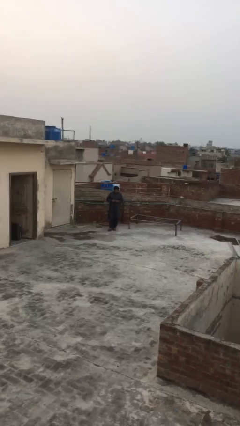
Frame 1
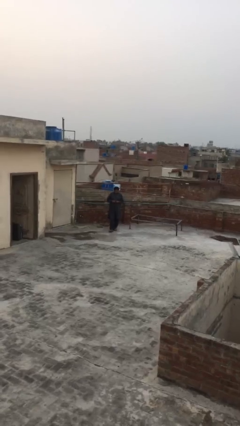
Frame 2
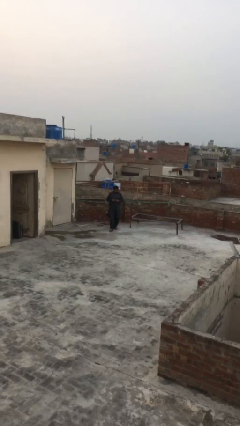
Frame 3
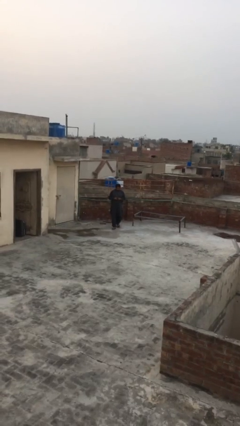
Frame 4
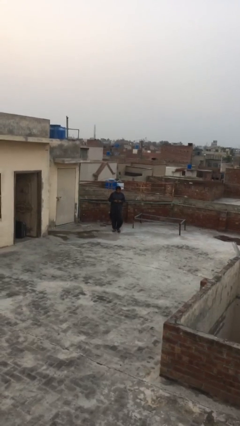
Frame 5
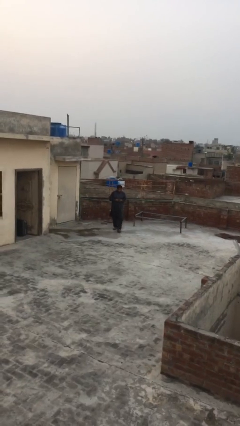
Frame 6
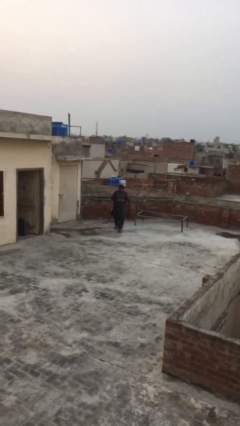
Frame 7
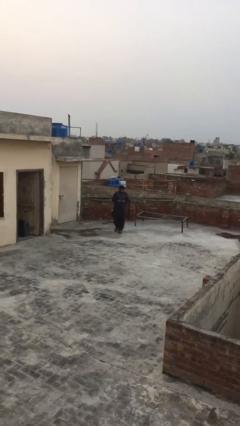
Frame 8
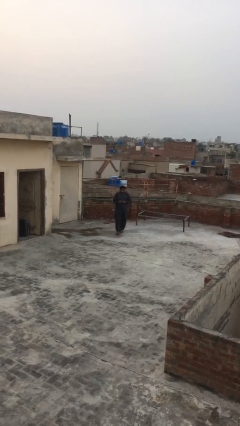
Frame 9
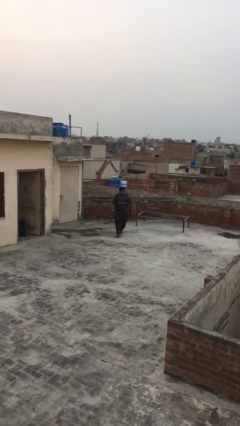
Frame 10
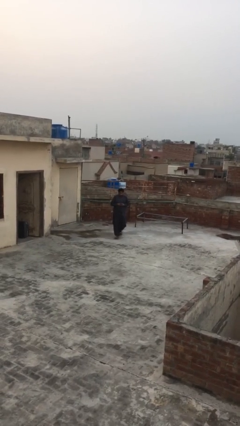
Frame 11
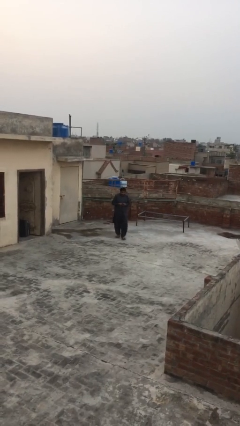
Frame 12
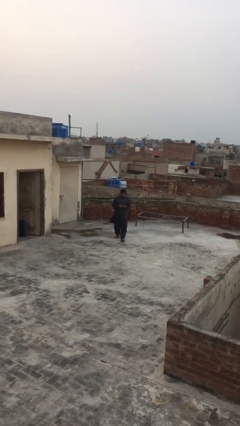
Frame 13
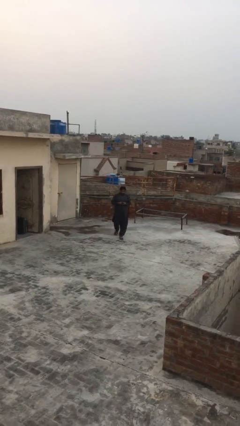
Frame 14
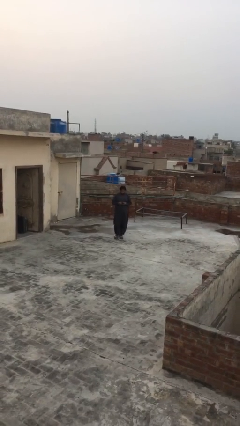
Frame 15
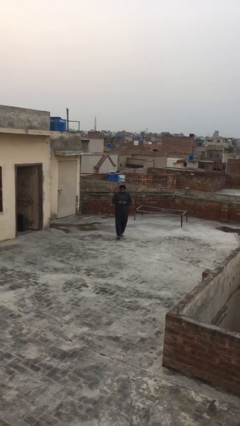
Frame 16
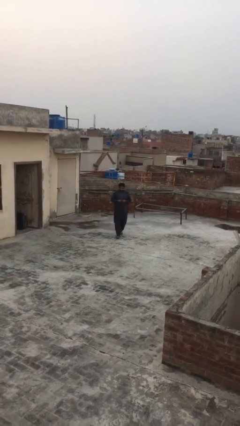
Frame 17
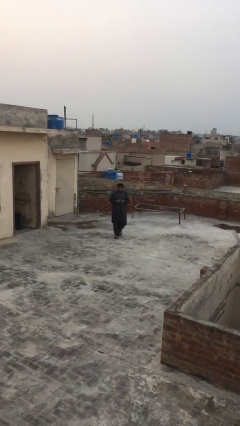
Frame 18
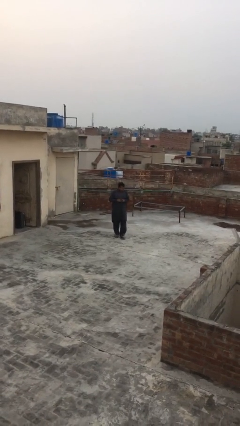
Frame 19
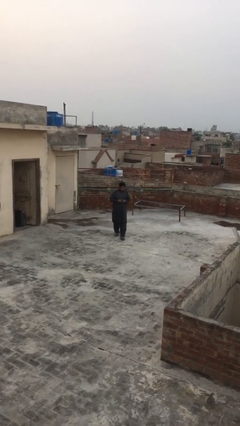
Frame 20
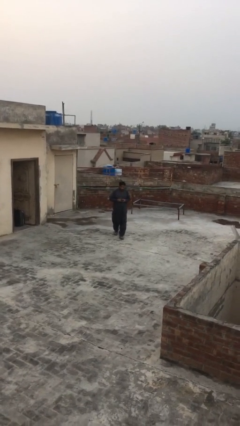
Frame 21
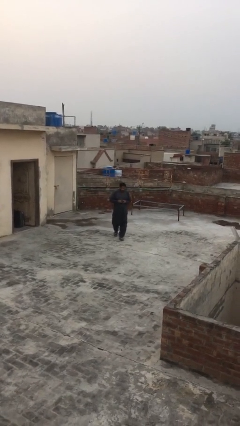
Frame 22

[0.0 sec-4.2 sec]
person texts on phone

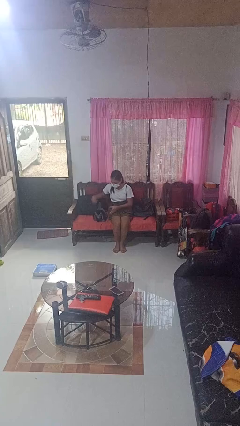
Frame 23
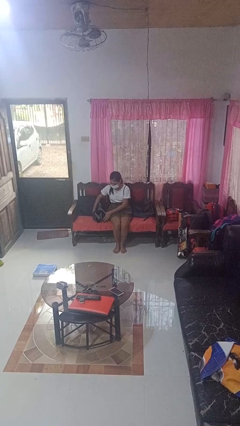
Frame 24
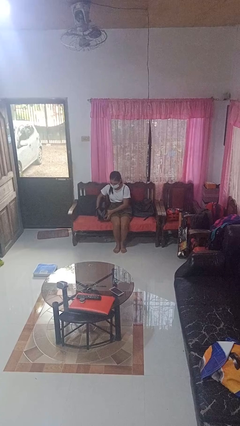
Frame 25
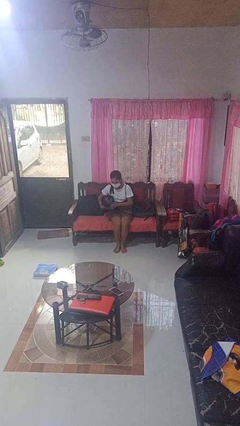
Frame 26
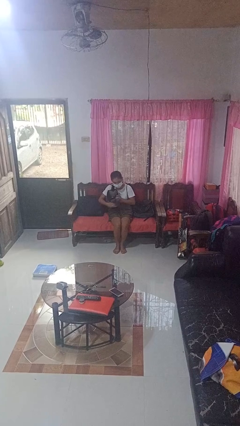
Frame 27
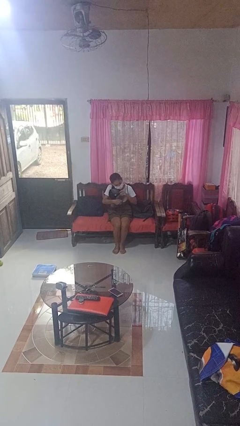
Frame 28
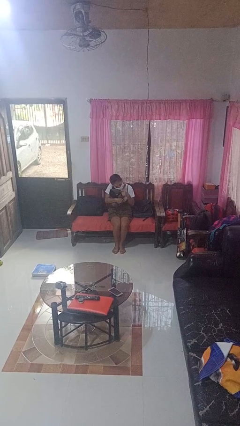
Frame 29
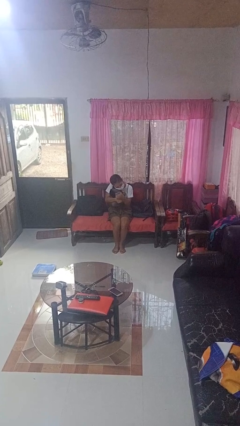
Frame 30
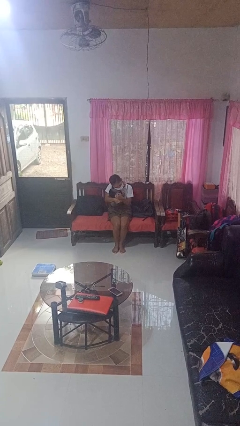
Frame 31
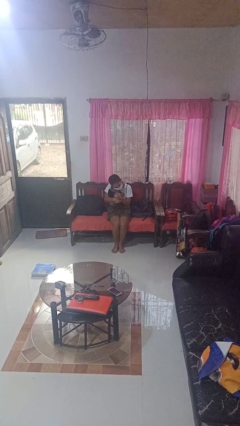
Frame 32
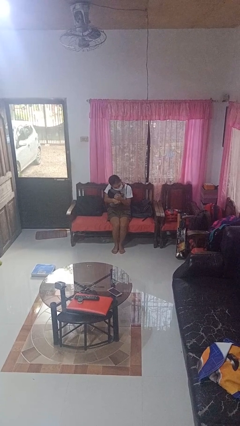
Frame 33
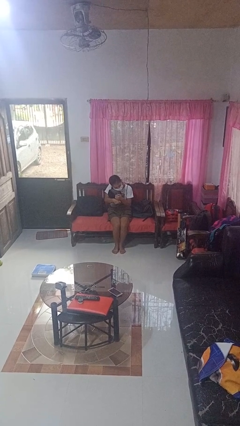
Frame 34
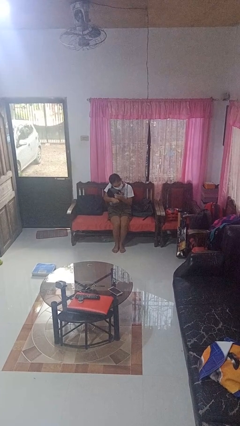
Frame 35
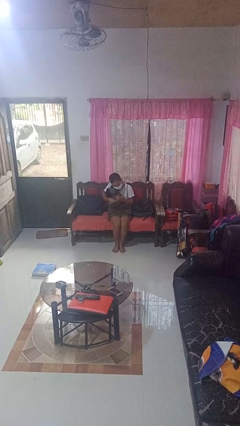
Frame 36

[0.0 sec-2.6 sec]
person hugs stuffed animal

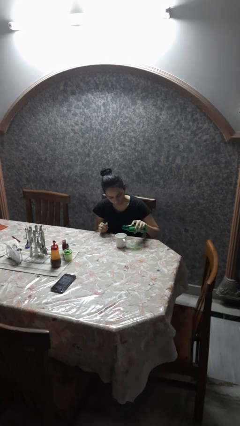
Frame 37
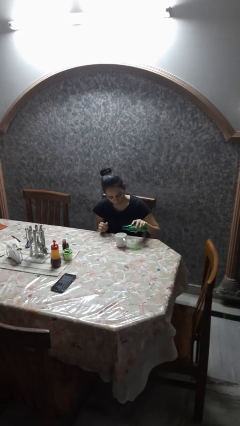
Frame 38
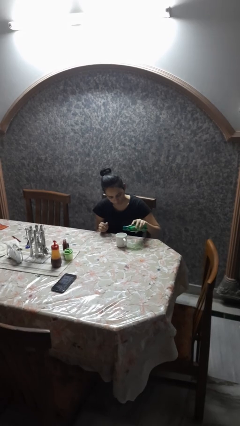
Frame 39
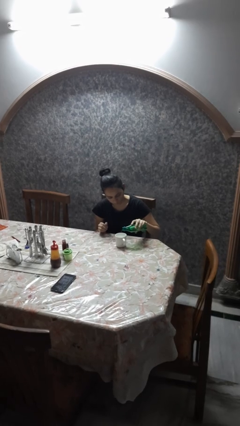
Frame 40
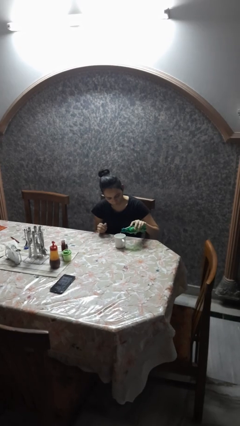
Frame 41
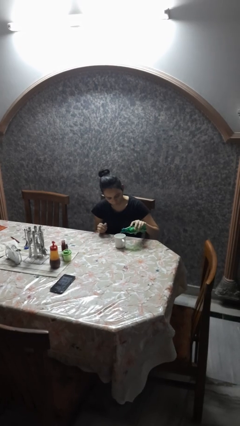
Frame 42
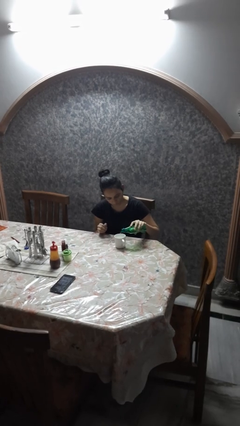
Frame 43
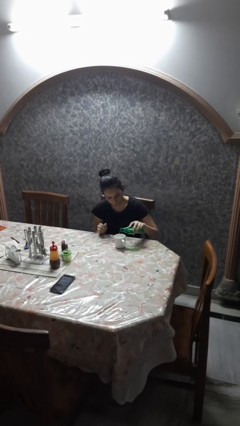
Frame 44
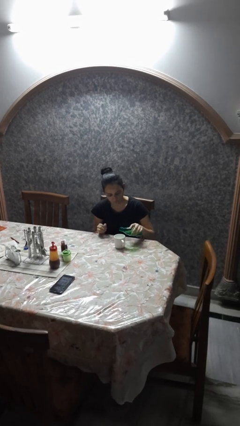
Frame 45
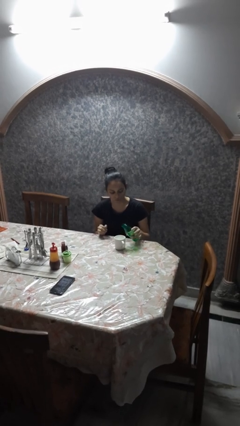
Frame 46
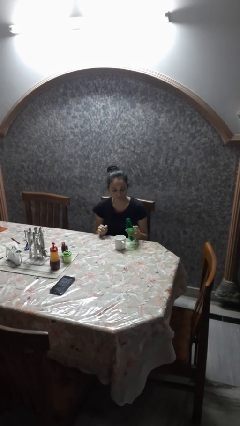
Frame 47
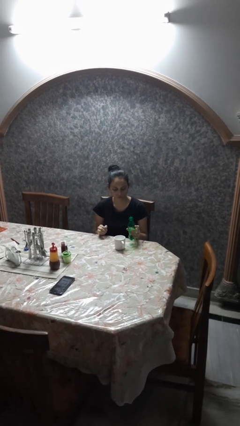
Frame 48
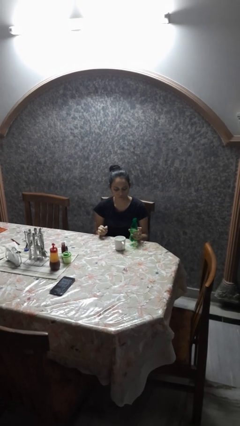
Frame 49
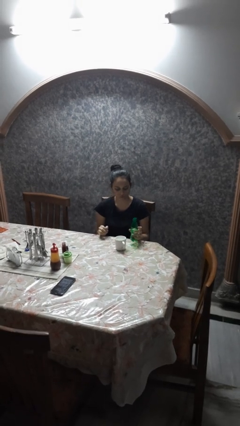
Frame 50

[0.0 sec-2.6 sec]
person pours liquid into cup

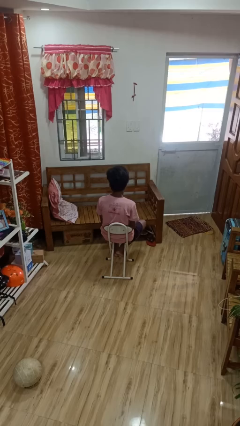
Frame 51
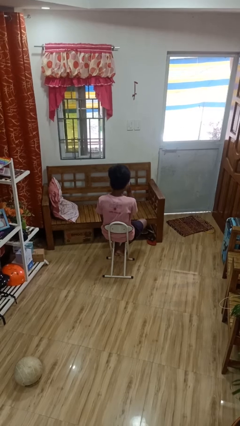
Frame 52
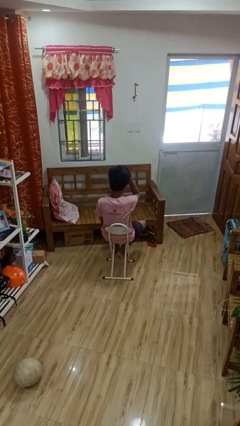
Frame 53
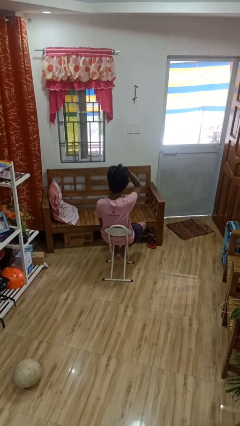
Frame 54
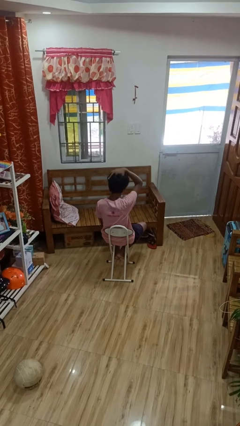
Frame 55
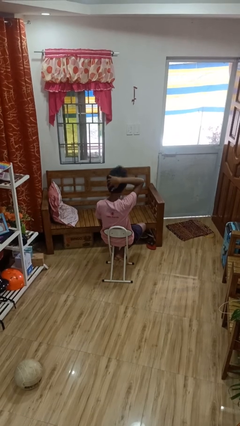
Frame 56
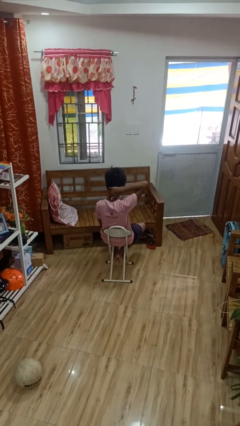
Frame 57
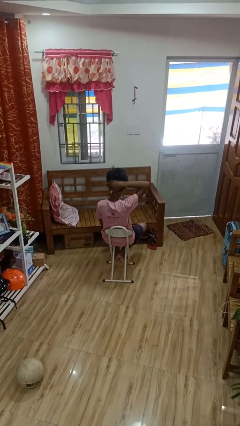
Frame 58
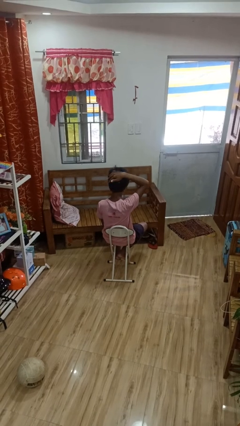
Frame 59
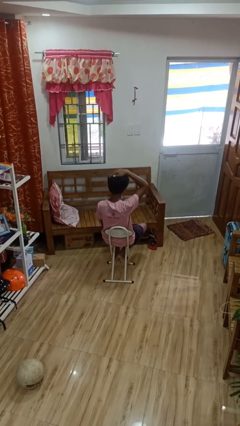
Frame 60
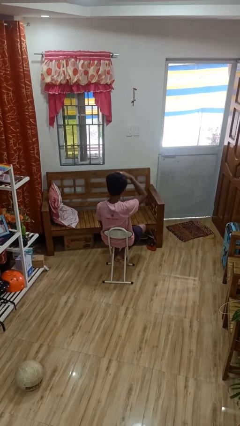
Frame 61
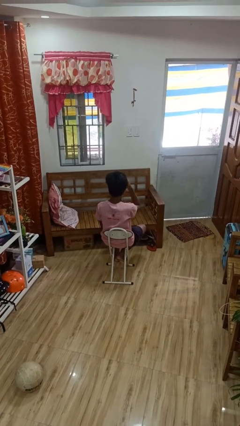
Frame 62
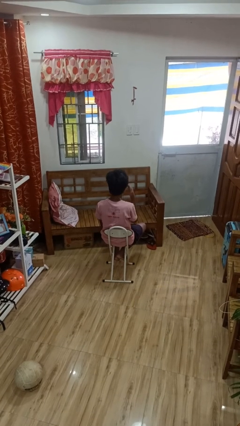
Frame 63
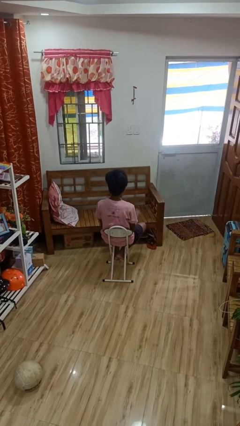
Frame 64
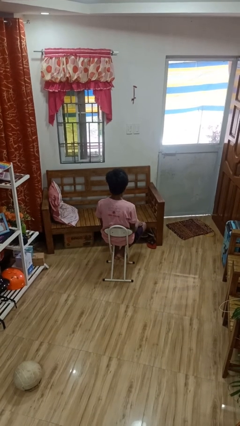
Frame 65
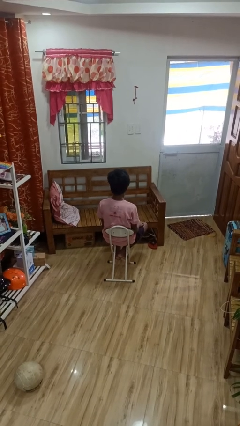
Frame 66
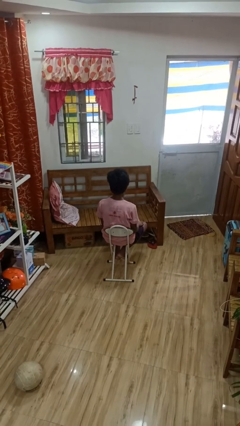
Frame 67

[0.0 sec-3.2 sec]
person strokes hair

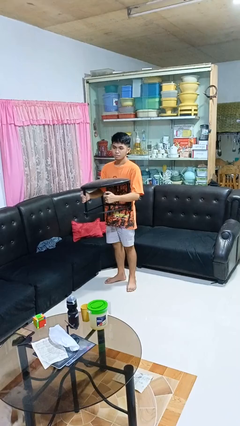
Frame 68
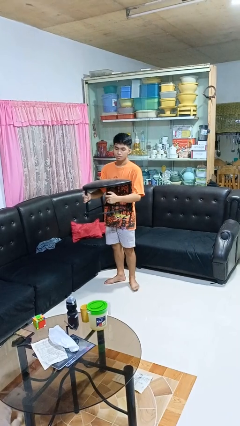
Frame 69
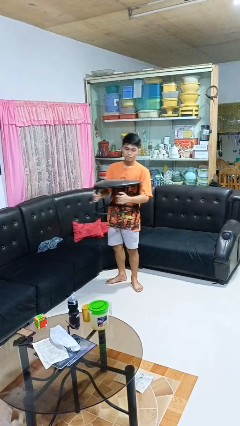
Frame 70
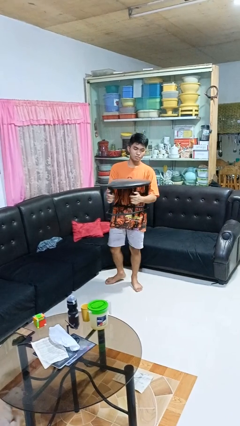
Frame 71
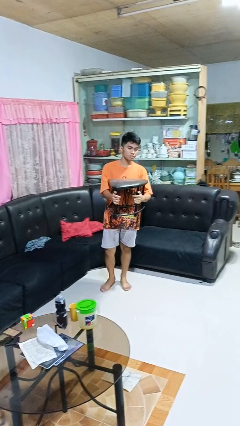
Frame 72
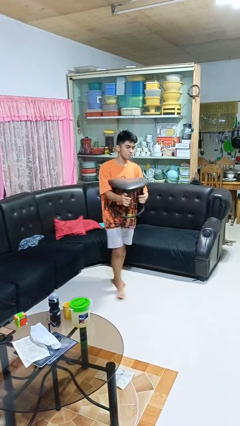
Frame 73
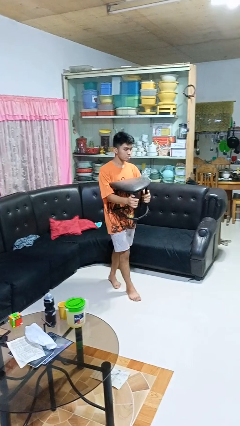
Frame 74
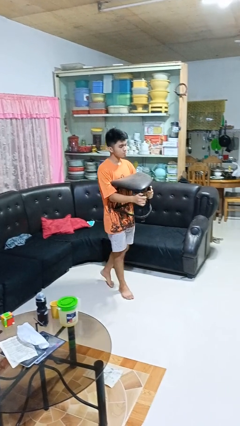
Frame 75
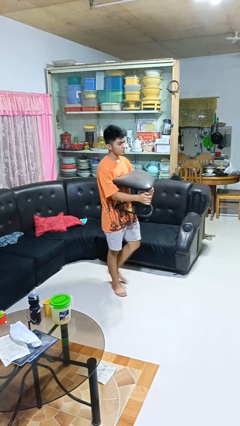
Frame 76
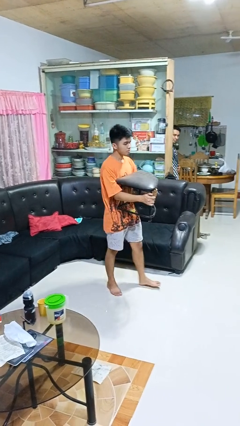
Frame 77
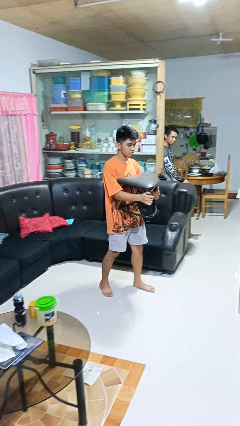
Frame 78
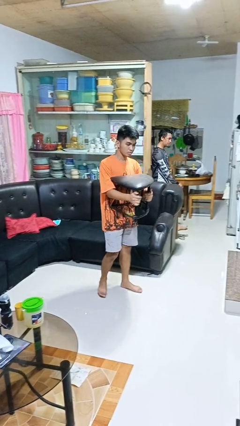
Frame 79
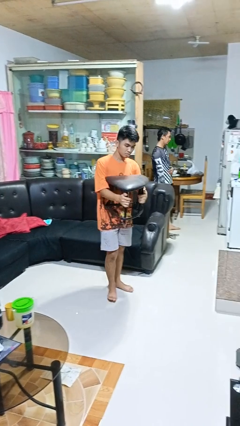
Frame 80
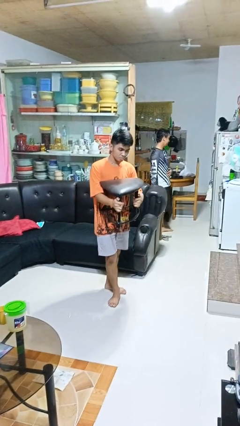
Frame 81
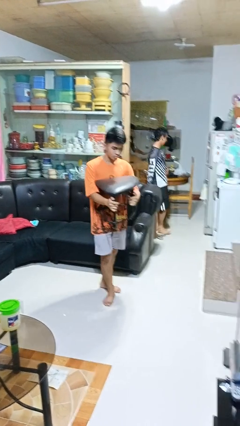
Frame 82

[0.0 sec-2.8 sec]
person carries furniture

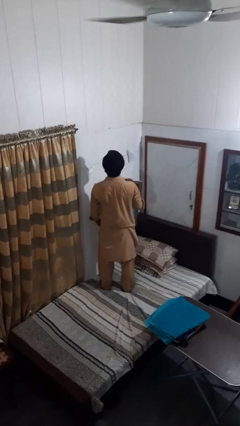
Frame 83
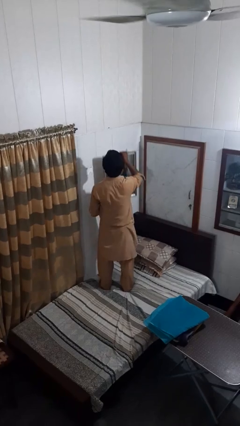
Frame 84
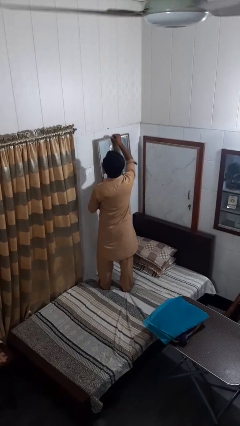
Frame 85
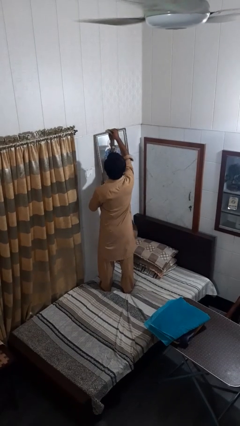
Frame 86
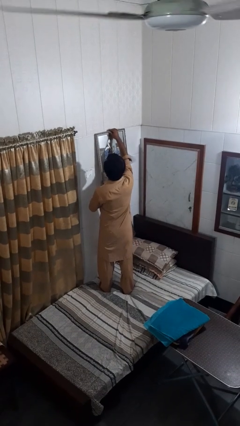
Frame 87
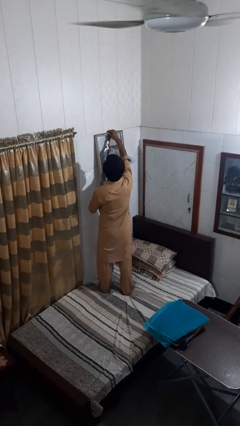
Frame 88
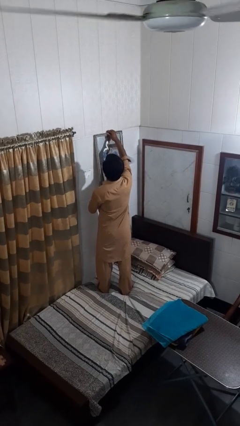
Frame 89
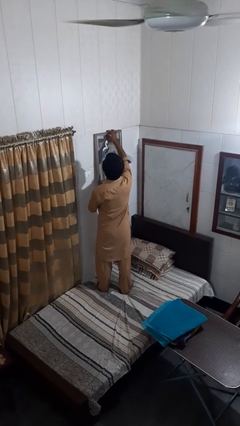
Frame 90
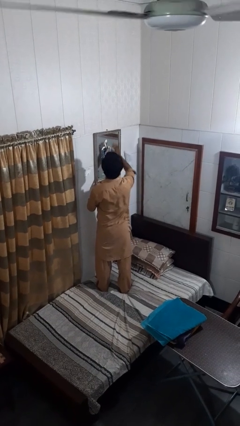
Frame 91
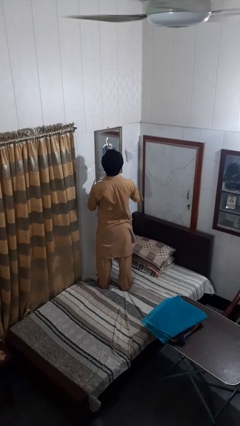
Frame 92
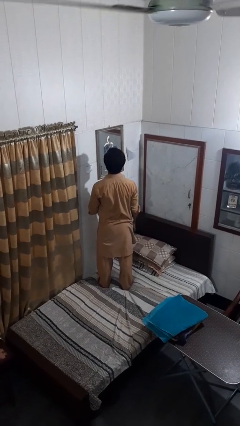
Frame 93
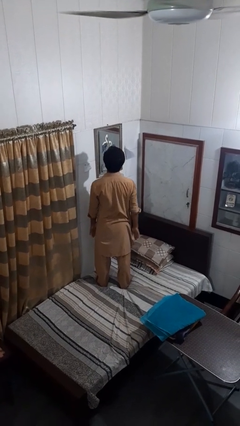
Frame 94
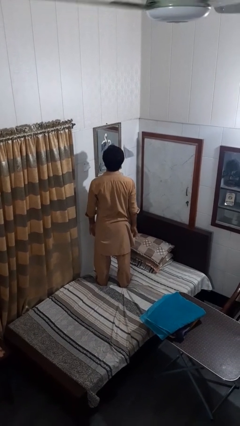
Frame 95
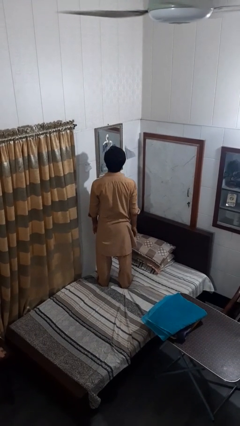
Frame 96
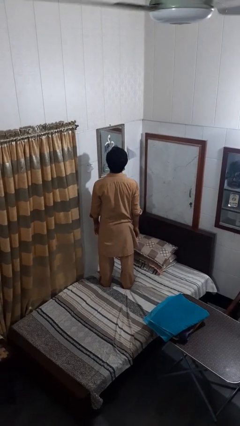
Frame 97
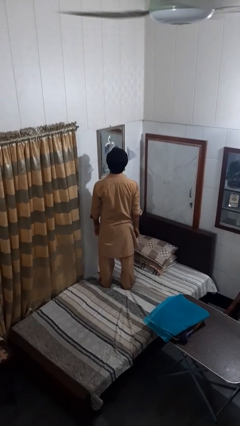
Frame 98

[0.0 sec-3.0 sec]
person puts up picture frame
